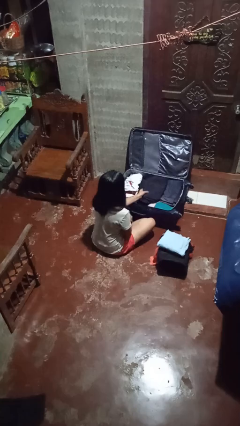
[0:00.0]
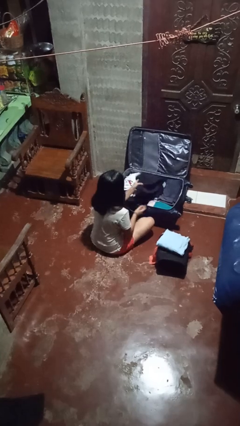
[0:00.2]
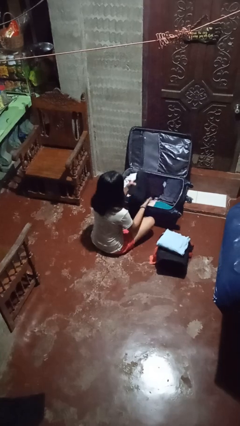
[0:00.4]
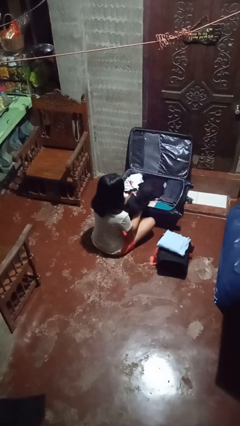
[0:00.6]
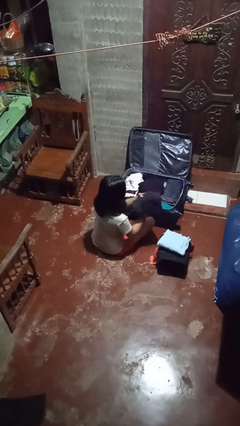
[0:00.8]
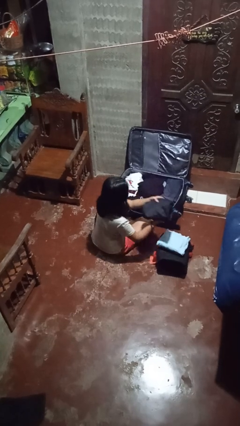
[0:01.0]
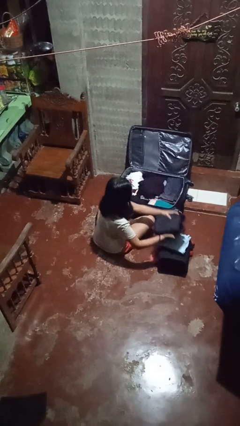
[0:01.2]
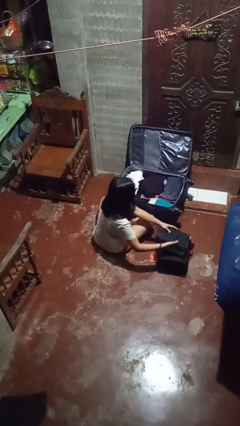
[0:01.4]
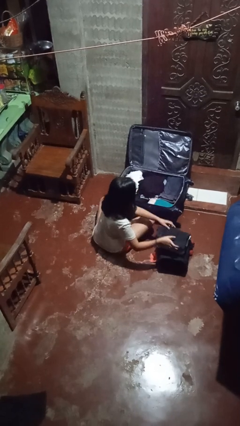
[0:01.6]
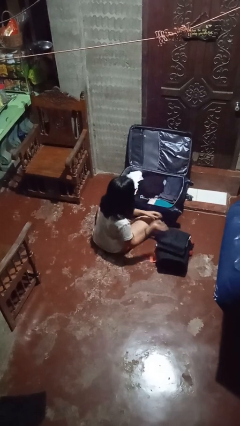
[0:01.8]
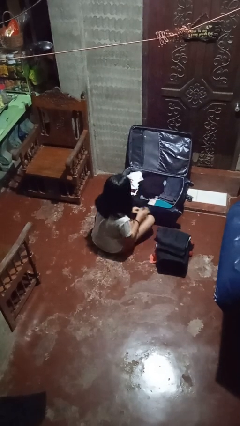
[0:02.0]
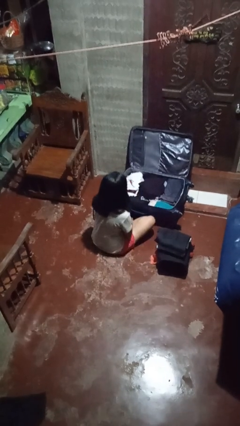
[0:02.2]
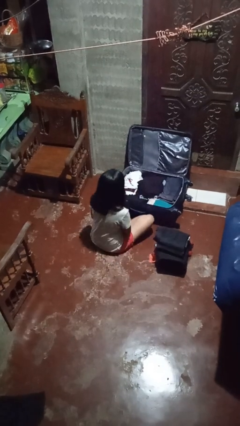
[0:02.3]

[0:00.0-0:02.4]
person unloads clothes from suitcase

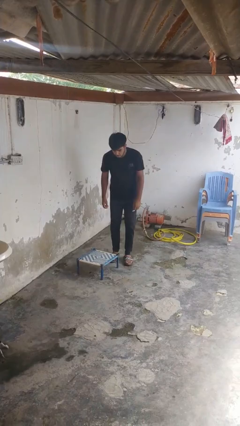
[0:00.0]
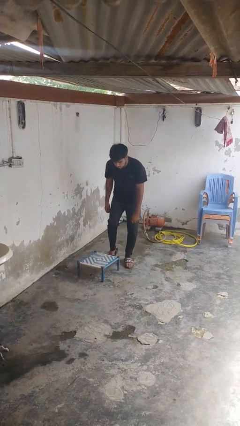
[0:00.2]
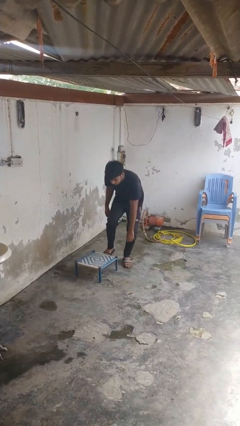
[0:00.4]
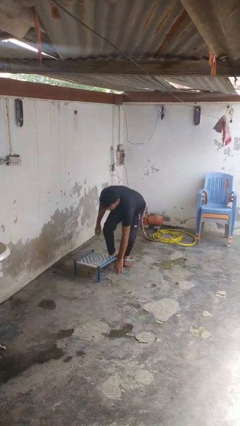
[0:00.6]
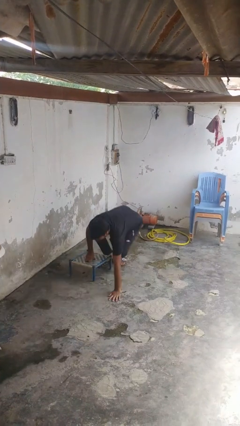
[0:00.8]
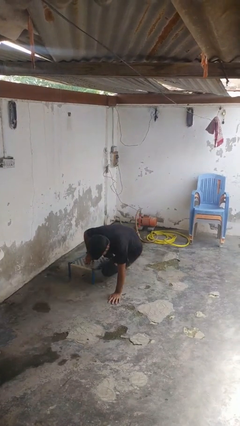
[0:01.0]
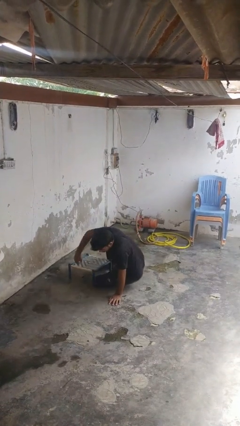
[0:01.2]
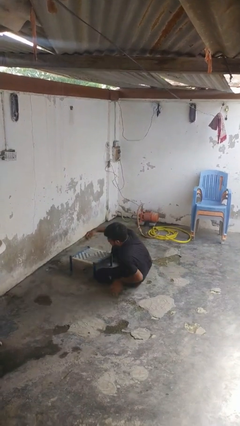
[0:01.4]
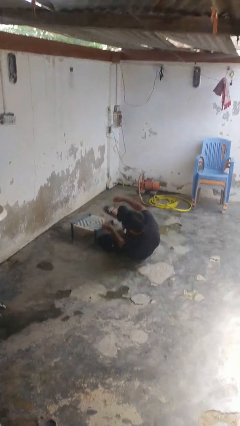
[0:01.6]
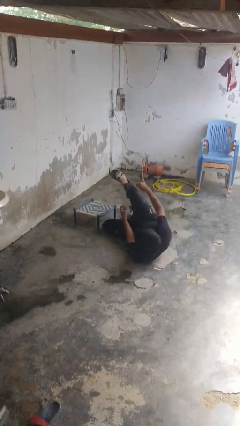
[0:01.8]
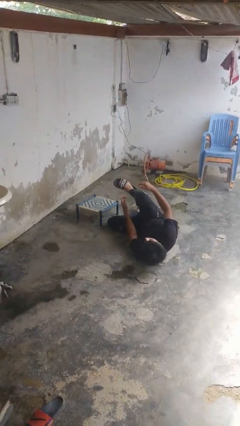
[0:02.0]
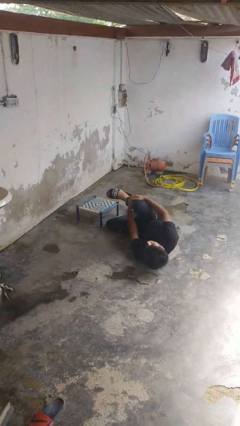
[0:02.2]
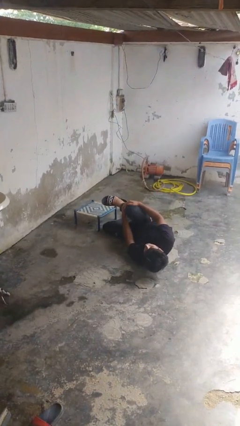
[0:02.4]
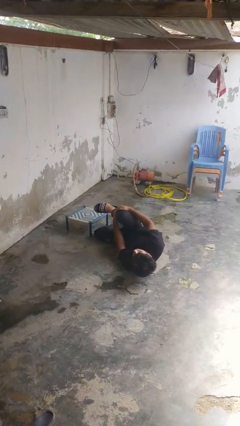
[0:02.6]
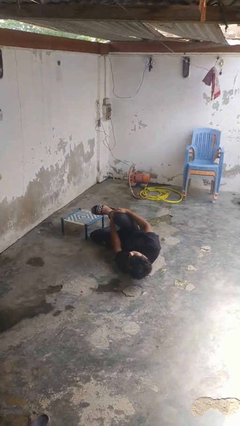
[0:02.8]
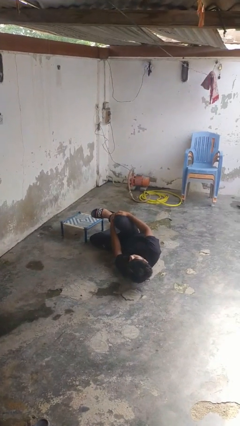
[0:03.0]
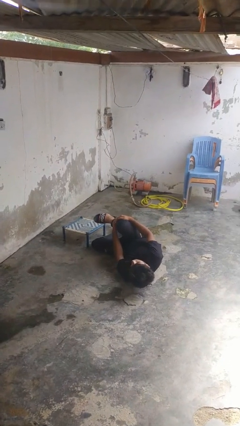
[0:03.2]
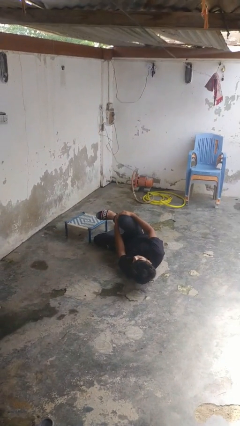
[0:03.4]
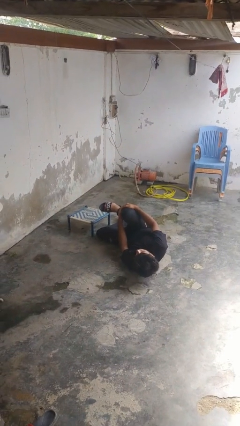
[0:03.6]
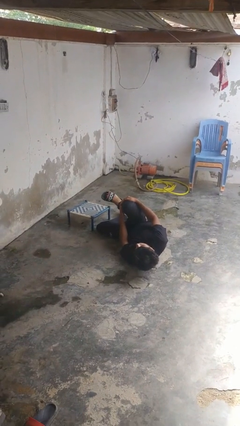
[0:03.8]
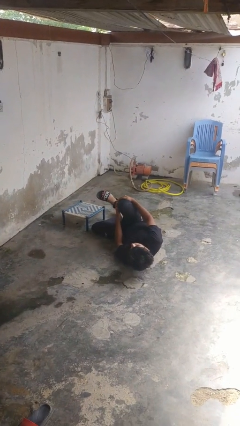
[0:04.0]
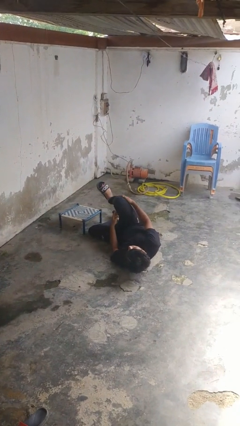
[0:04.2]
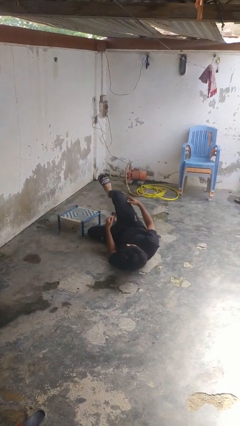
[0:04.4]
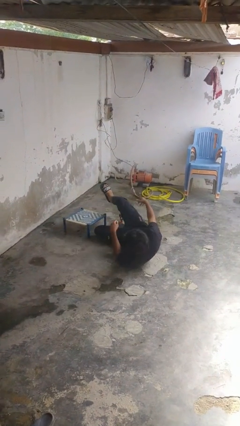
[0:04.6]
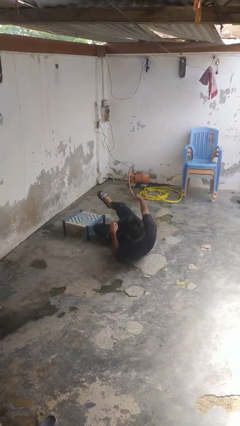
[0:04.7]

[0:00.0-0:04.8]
person lies down on floor

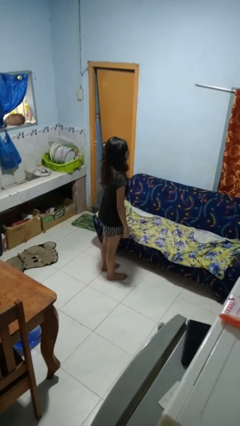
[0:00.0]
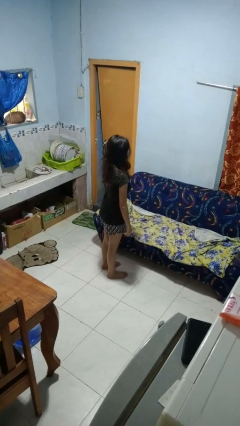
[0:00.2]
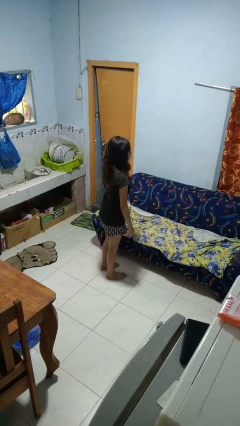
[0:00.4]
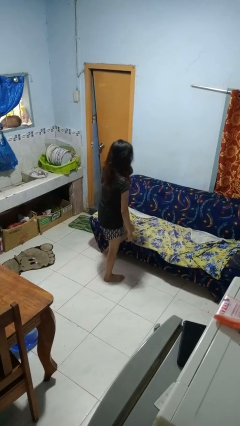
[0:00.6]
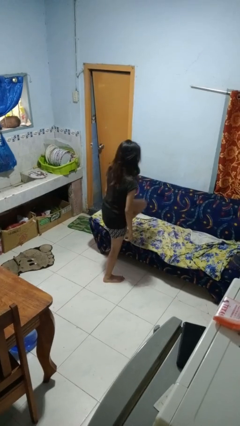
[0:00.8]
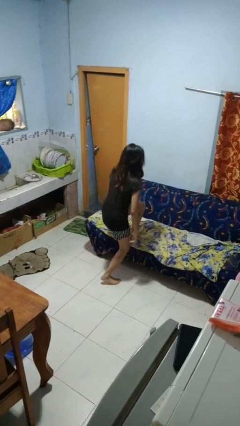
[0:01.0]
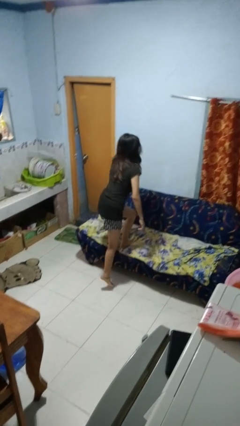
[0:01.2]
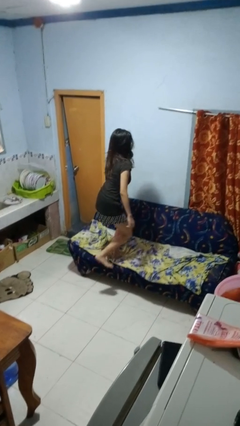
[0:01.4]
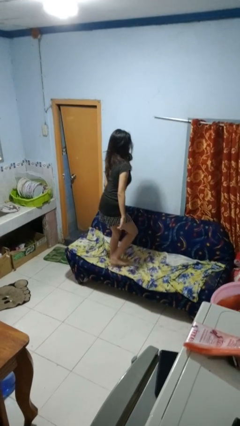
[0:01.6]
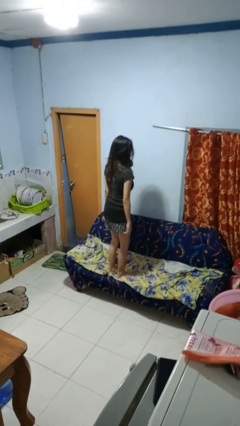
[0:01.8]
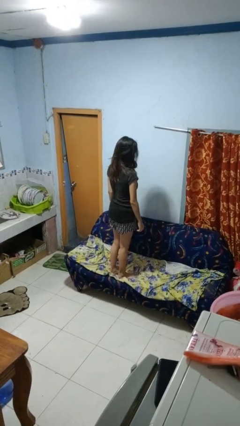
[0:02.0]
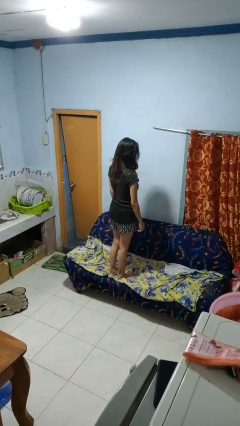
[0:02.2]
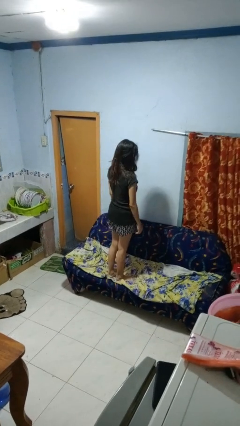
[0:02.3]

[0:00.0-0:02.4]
person climbs on couch

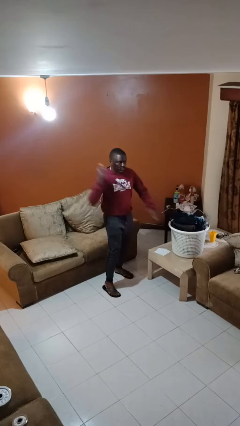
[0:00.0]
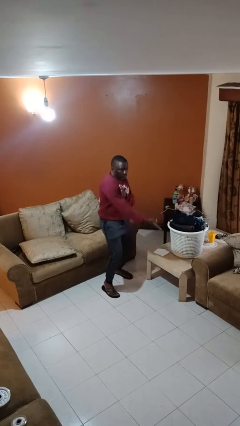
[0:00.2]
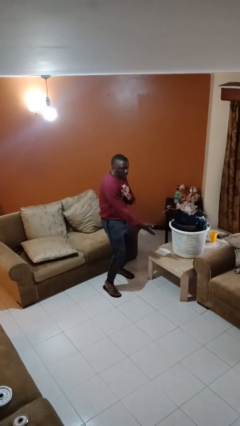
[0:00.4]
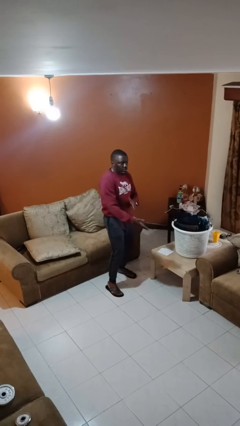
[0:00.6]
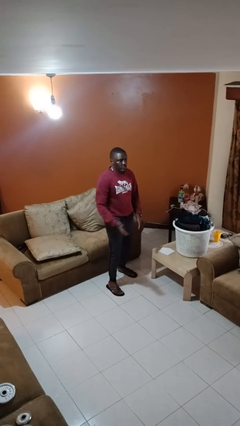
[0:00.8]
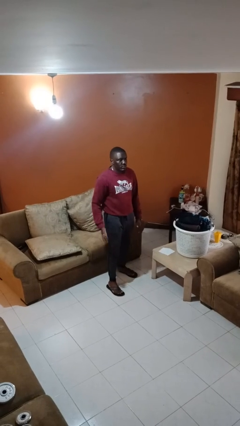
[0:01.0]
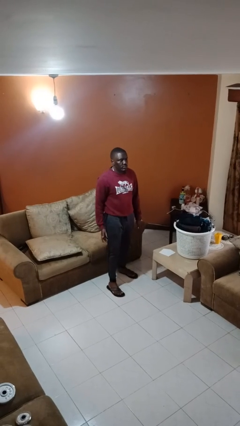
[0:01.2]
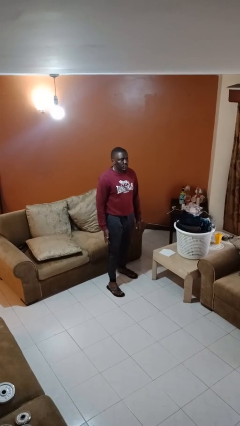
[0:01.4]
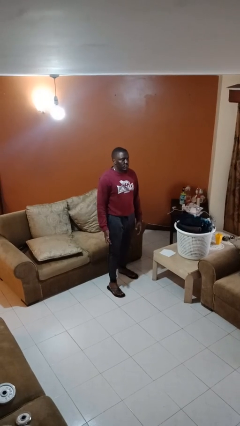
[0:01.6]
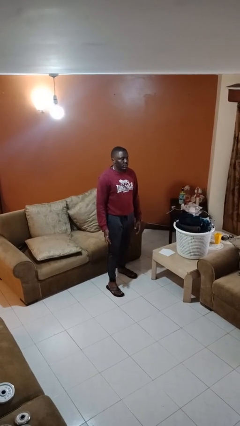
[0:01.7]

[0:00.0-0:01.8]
person karate chop

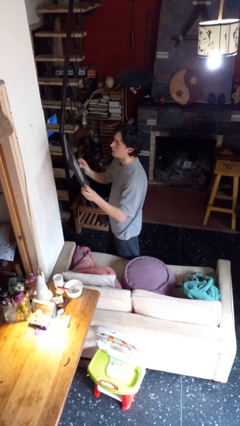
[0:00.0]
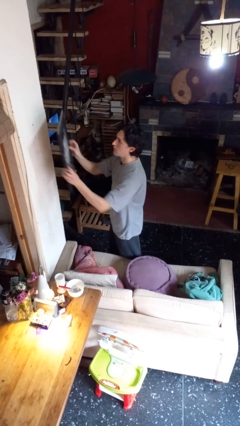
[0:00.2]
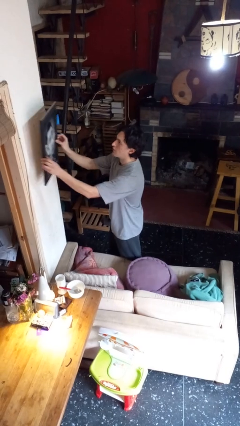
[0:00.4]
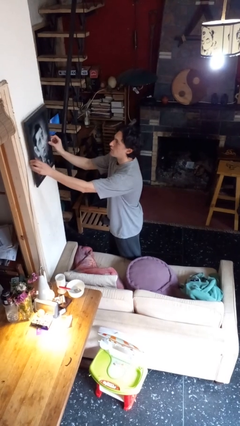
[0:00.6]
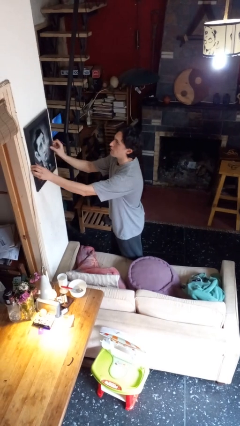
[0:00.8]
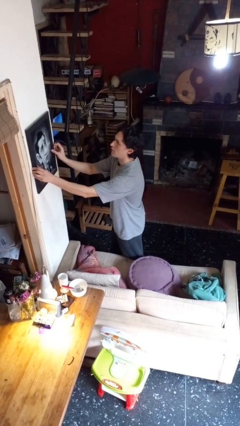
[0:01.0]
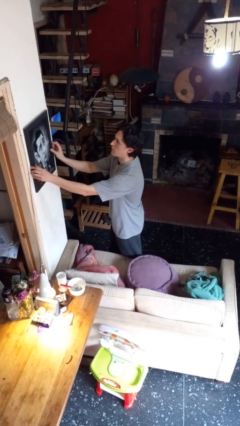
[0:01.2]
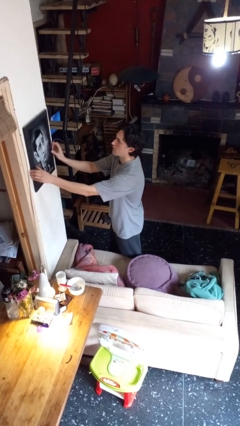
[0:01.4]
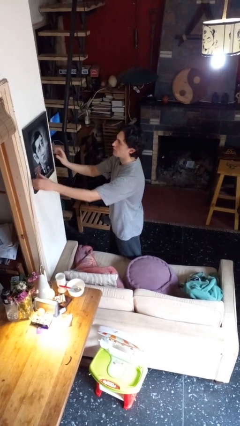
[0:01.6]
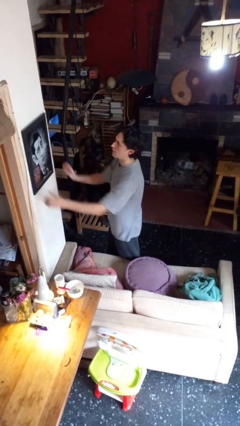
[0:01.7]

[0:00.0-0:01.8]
person puts up picture frame

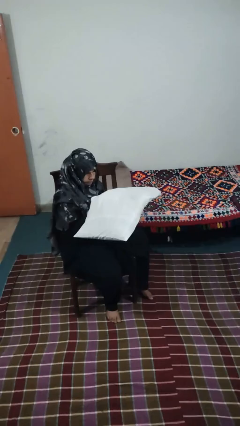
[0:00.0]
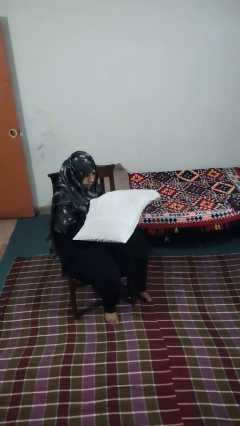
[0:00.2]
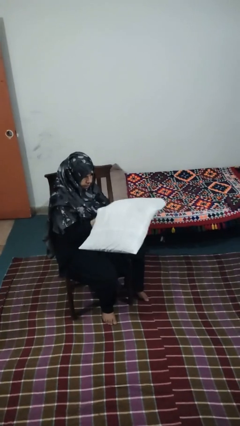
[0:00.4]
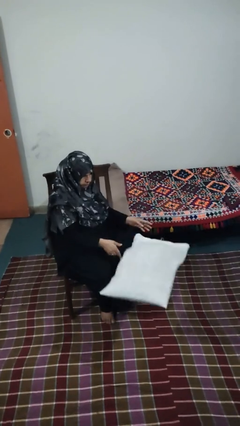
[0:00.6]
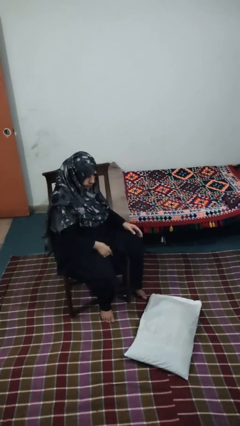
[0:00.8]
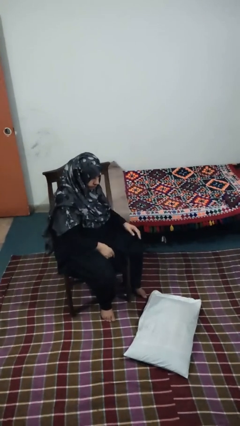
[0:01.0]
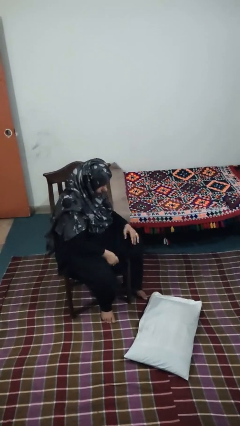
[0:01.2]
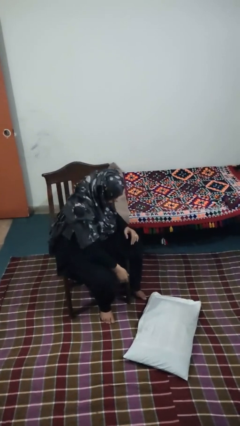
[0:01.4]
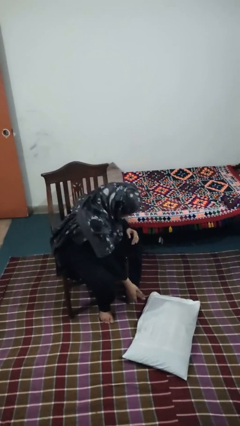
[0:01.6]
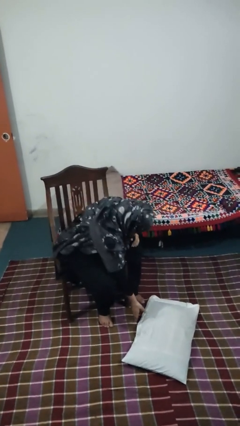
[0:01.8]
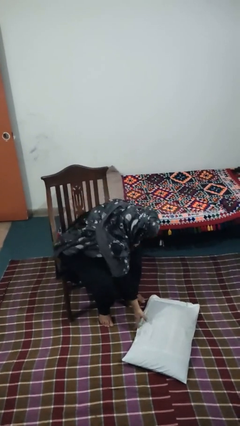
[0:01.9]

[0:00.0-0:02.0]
person drops object

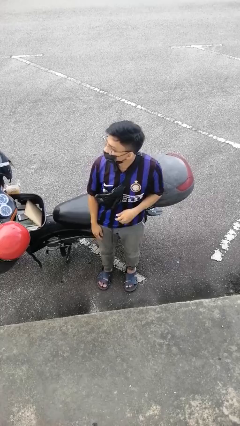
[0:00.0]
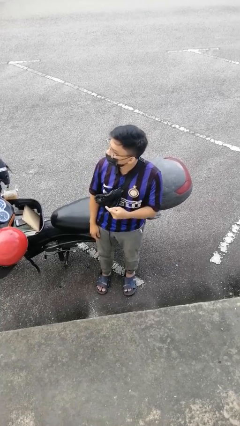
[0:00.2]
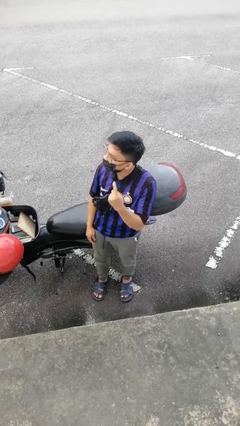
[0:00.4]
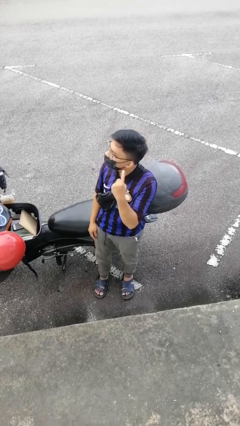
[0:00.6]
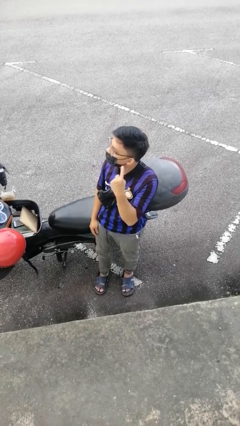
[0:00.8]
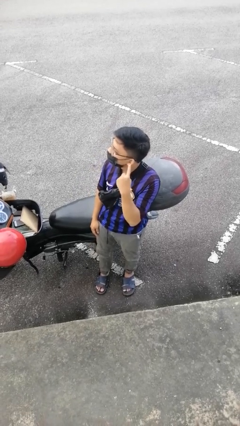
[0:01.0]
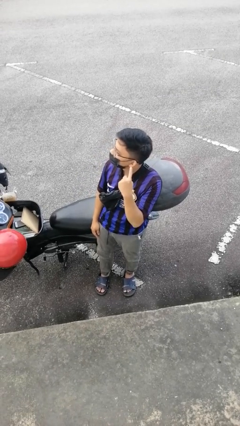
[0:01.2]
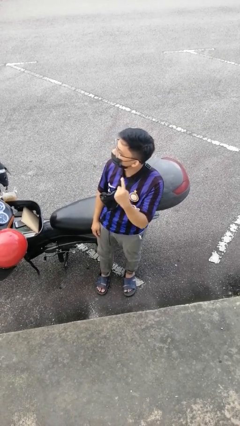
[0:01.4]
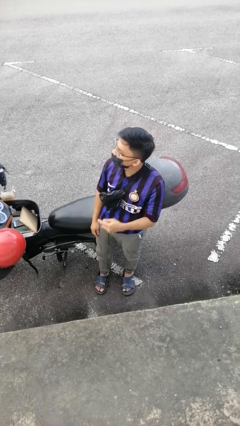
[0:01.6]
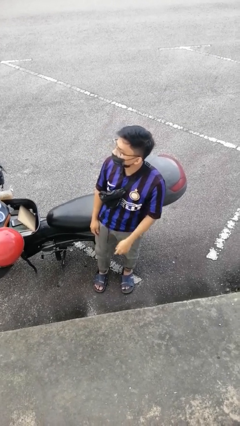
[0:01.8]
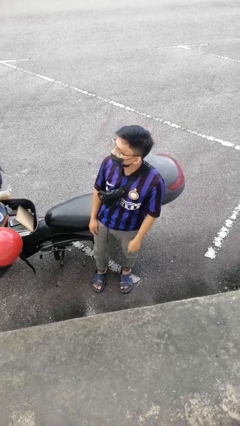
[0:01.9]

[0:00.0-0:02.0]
person gestures listen closely

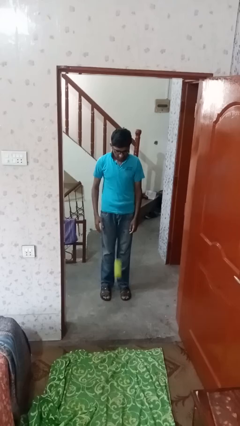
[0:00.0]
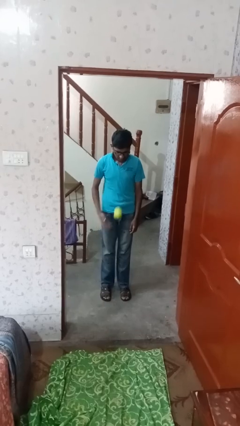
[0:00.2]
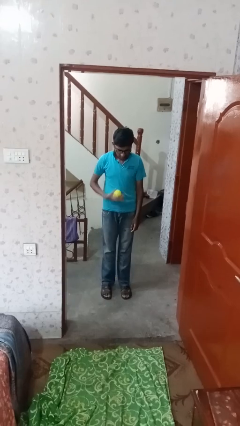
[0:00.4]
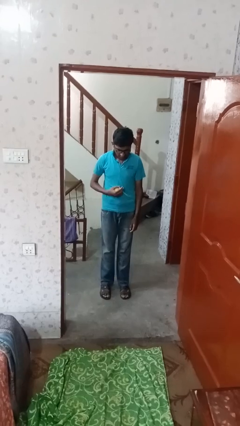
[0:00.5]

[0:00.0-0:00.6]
person bounces ball on floor
